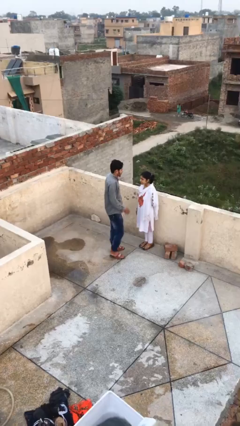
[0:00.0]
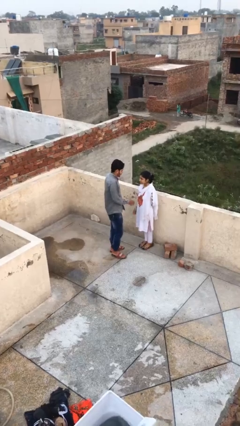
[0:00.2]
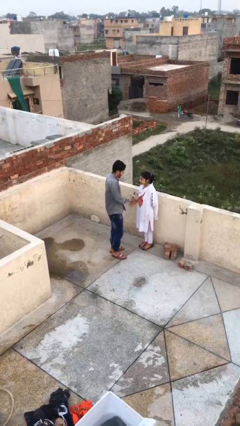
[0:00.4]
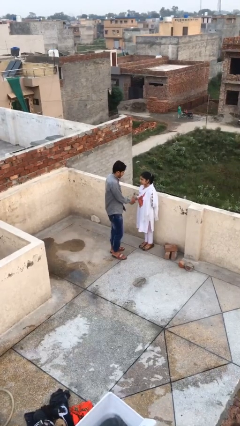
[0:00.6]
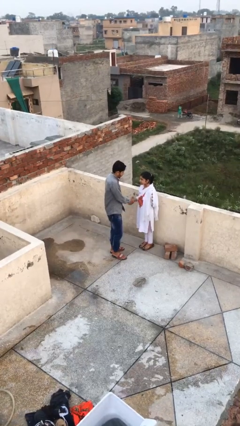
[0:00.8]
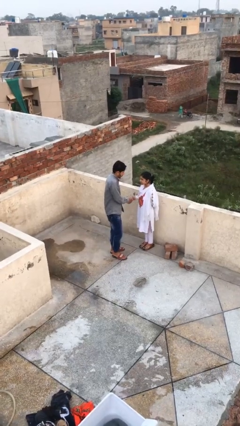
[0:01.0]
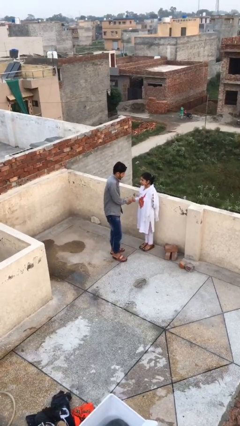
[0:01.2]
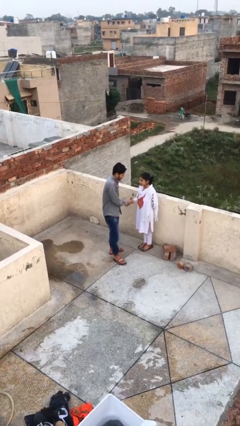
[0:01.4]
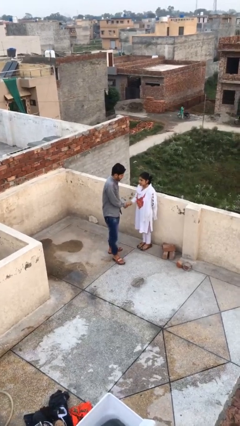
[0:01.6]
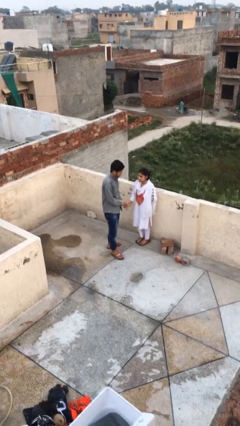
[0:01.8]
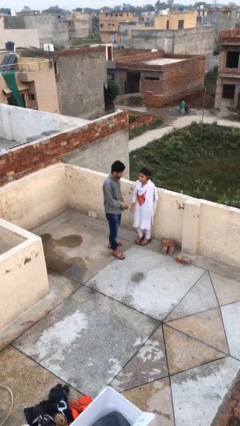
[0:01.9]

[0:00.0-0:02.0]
person shakes hand

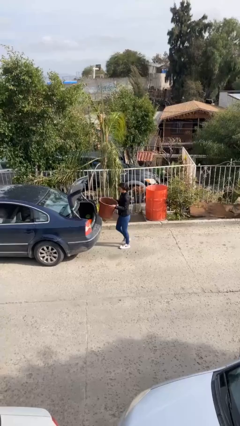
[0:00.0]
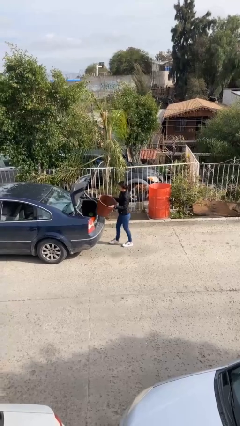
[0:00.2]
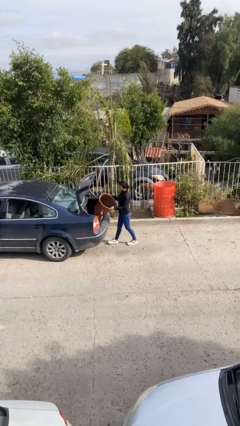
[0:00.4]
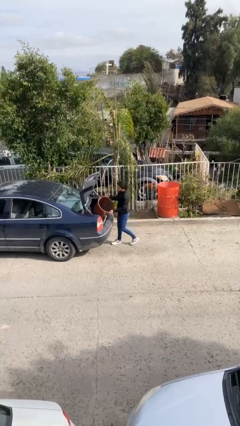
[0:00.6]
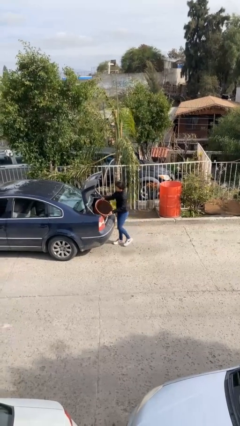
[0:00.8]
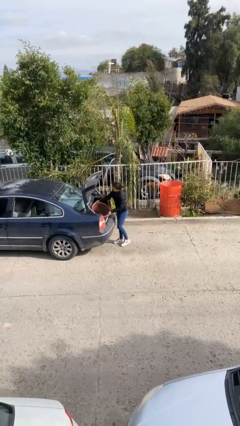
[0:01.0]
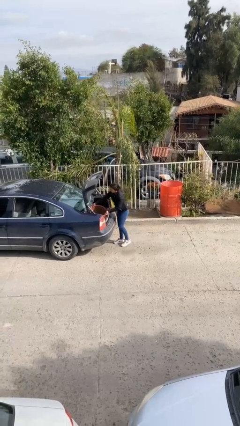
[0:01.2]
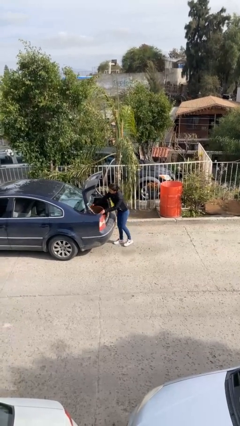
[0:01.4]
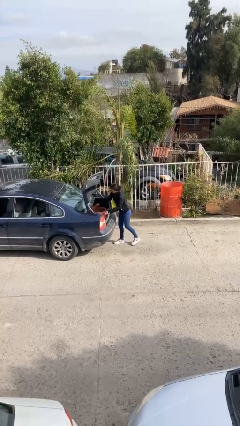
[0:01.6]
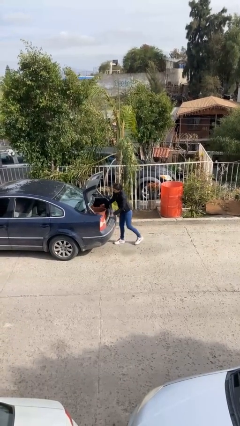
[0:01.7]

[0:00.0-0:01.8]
person loads car

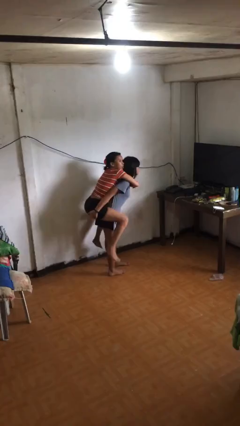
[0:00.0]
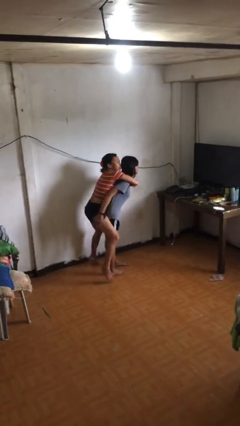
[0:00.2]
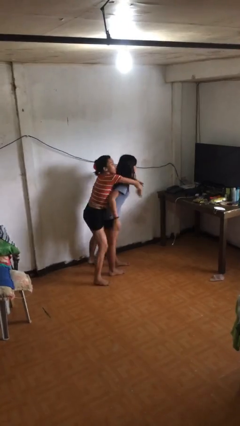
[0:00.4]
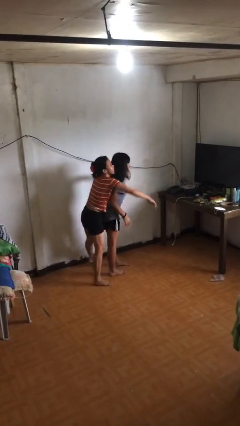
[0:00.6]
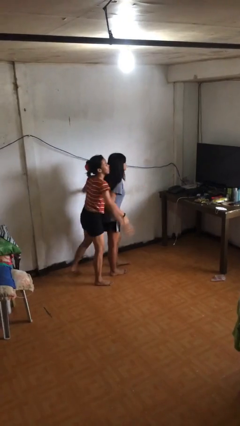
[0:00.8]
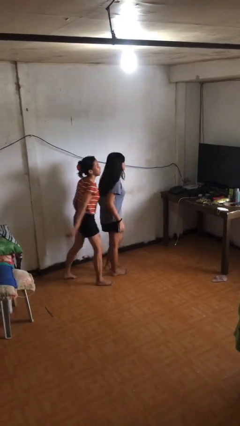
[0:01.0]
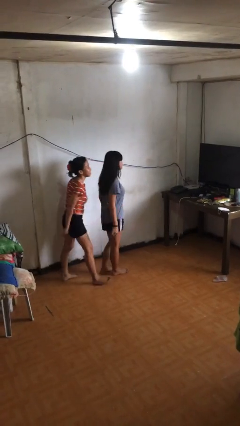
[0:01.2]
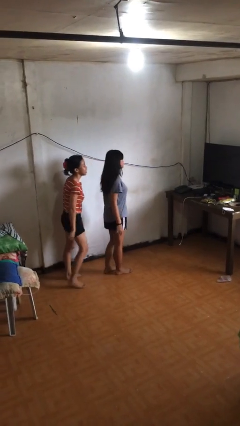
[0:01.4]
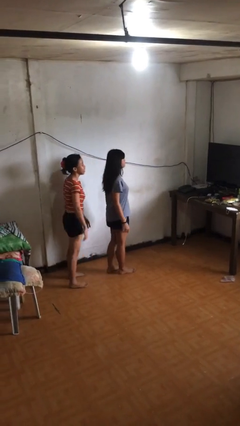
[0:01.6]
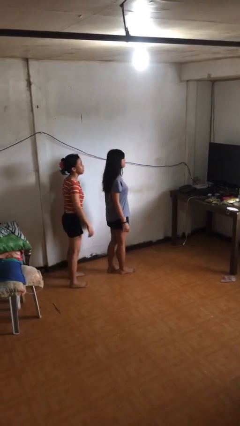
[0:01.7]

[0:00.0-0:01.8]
person puts down person

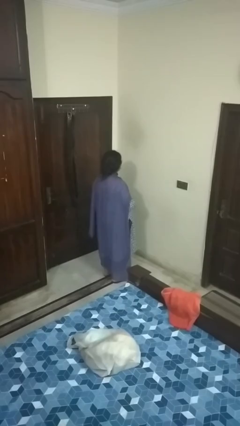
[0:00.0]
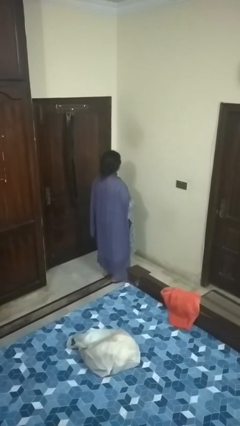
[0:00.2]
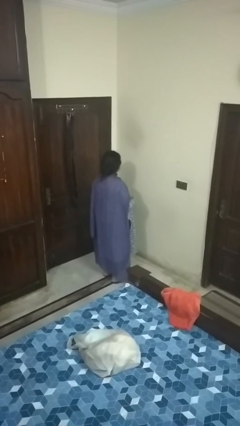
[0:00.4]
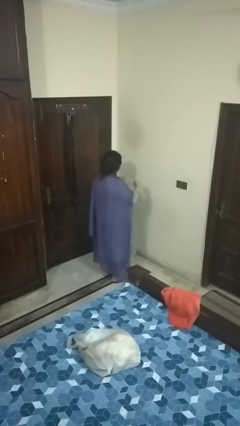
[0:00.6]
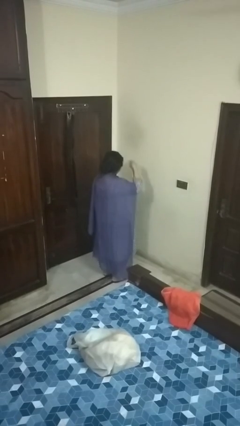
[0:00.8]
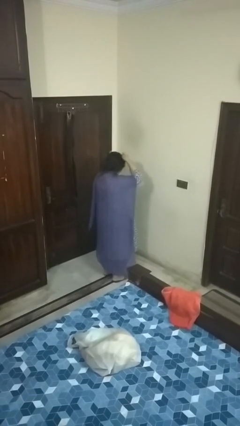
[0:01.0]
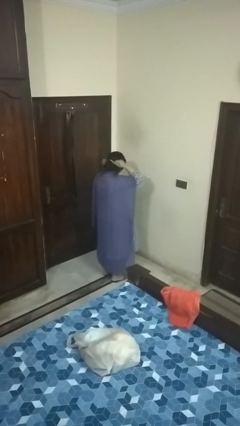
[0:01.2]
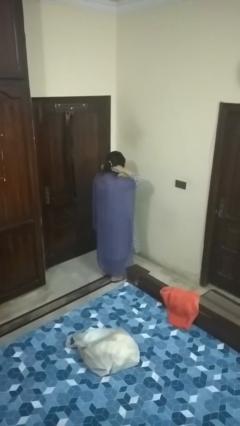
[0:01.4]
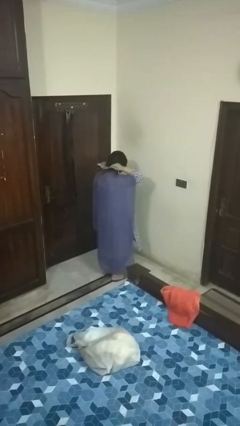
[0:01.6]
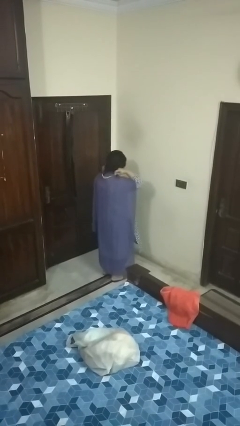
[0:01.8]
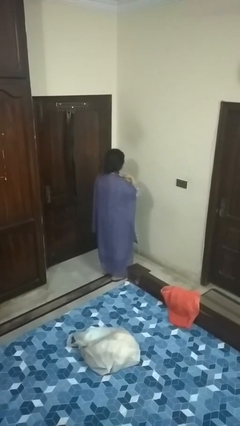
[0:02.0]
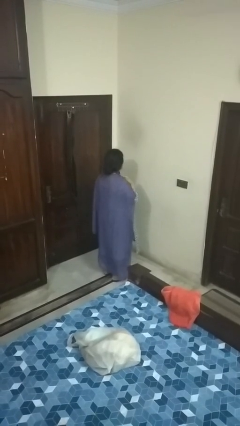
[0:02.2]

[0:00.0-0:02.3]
person puts on necklace

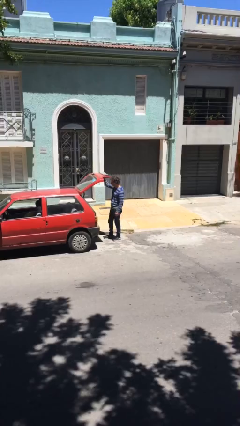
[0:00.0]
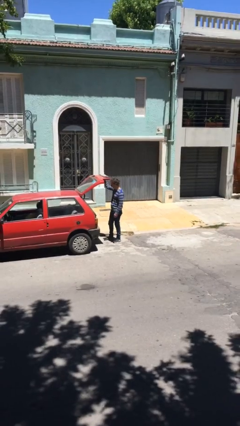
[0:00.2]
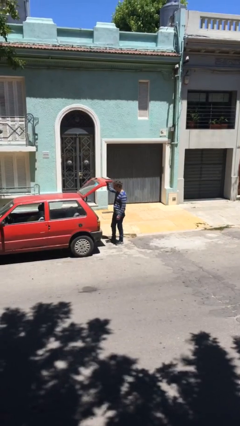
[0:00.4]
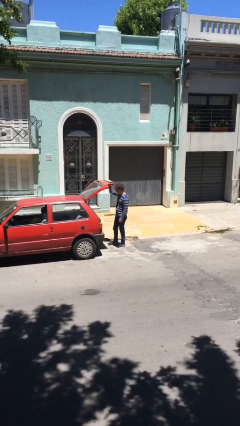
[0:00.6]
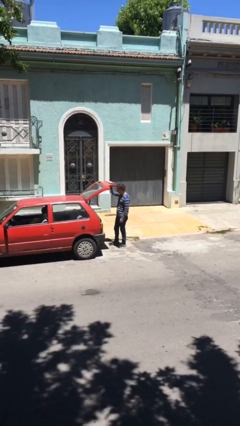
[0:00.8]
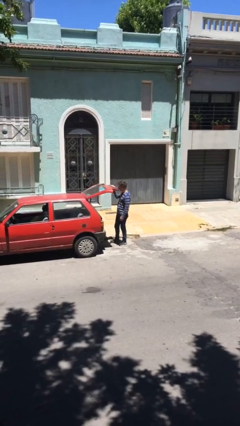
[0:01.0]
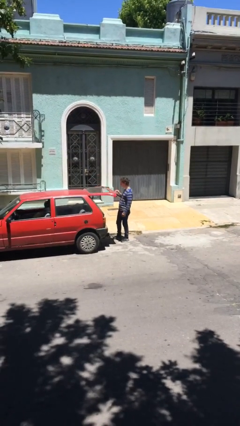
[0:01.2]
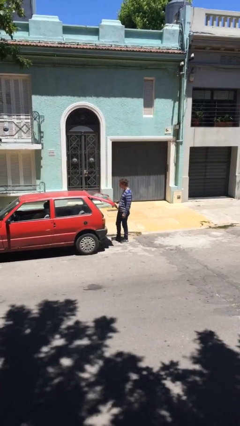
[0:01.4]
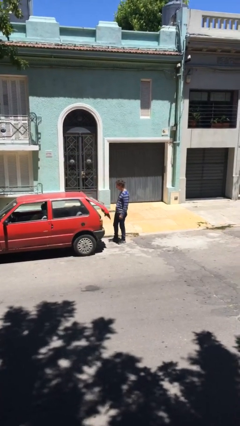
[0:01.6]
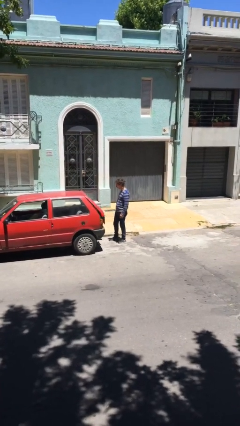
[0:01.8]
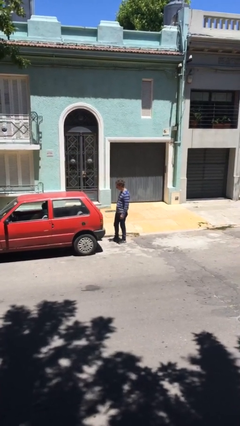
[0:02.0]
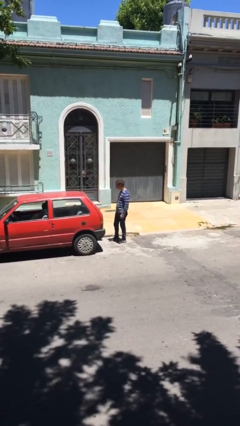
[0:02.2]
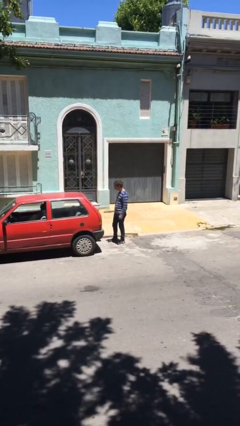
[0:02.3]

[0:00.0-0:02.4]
person closes car trunk

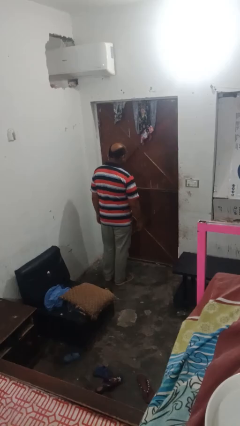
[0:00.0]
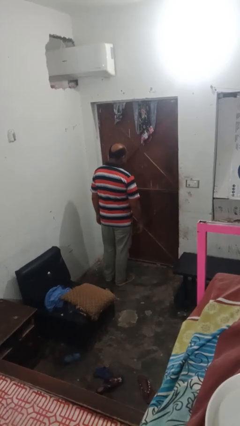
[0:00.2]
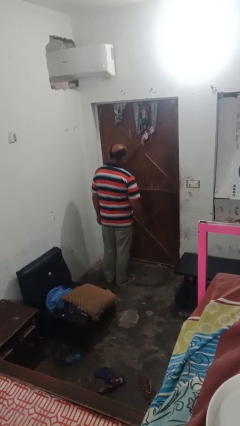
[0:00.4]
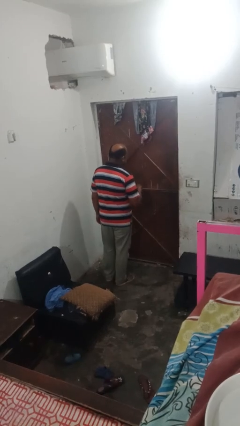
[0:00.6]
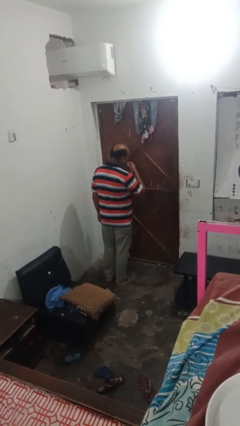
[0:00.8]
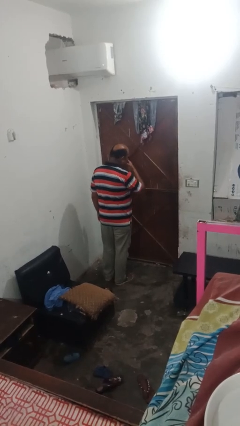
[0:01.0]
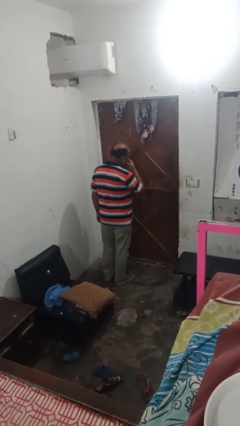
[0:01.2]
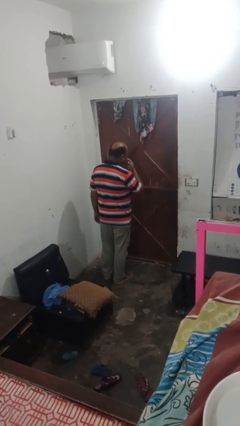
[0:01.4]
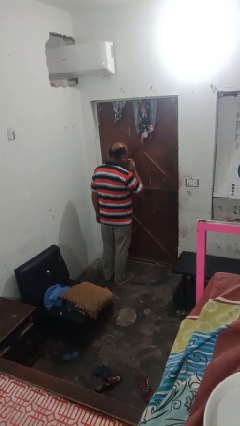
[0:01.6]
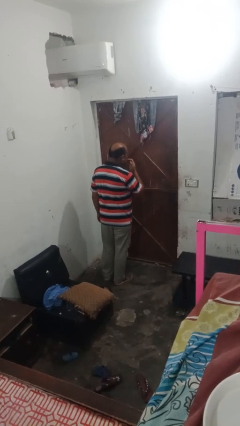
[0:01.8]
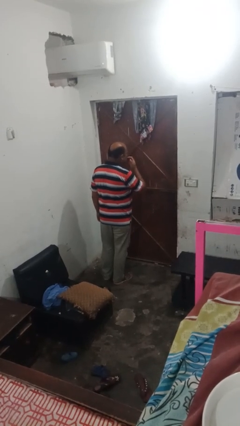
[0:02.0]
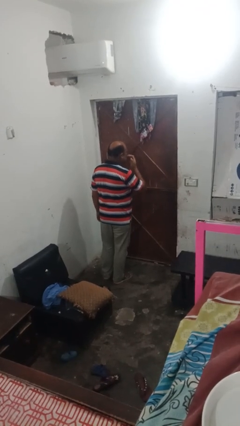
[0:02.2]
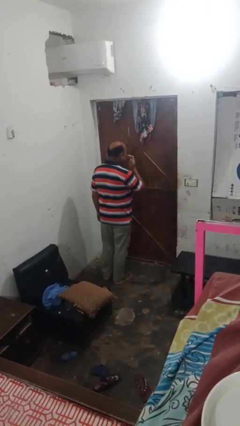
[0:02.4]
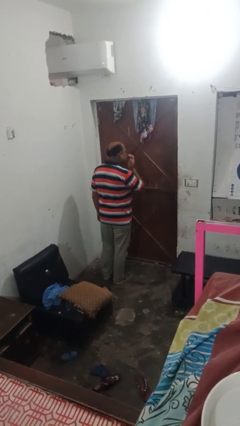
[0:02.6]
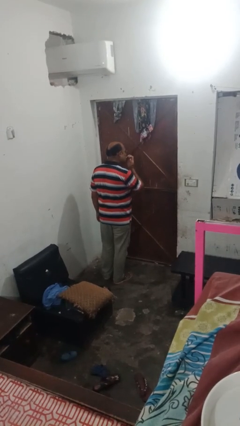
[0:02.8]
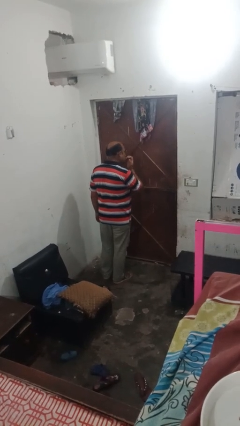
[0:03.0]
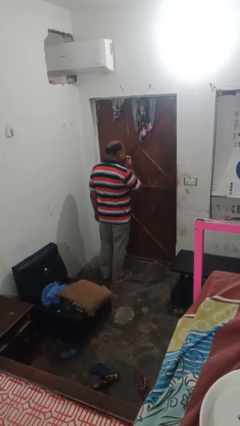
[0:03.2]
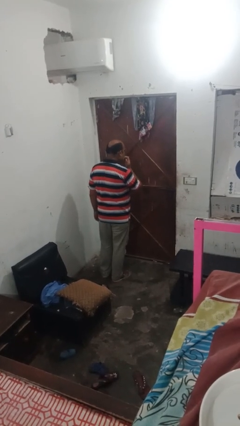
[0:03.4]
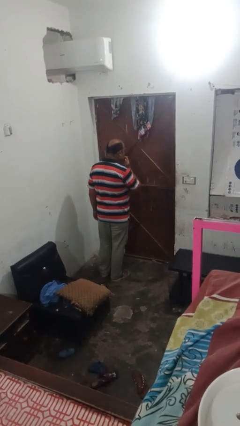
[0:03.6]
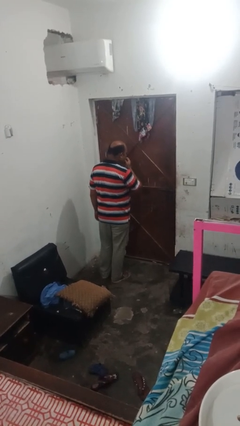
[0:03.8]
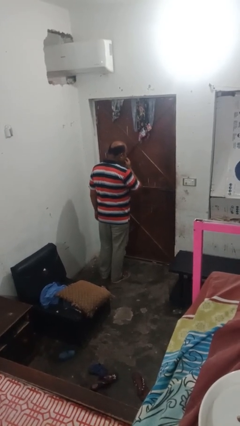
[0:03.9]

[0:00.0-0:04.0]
person licks fingers

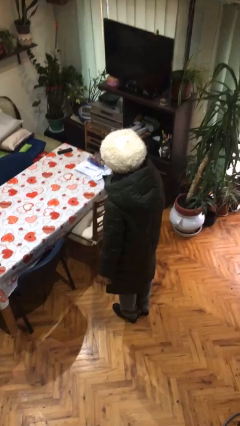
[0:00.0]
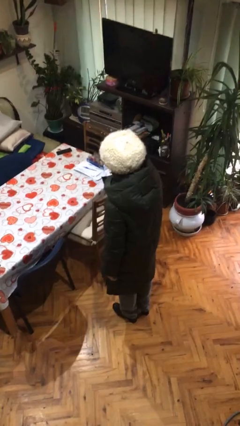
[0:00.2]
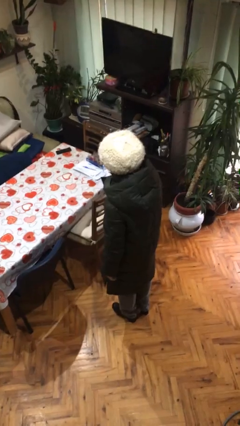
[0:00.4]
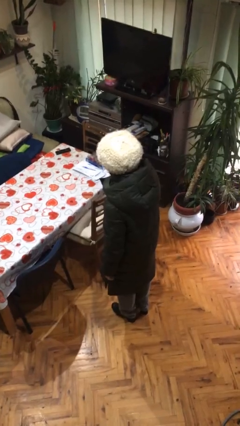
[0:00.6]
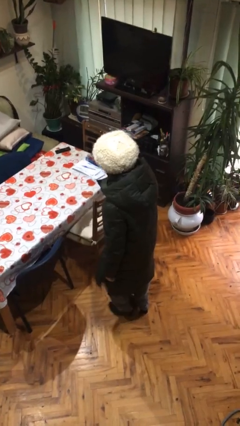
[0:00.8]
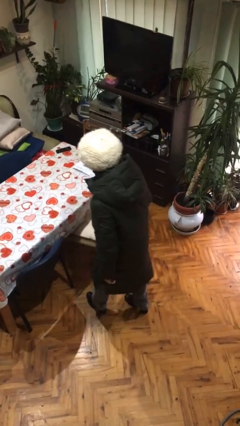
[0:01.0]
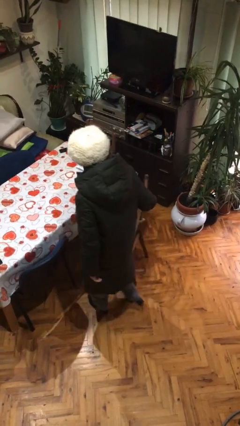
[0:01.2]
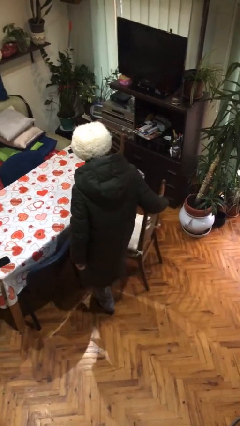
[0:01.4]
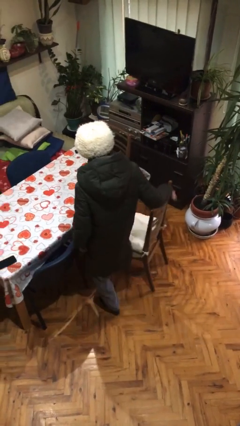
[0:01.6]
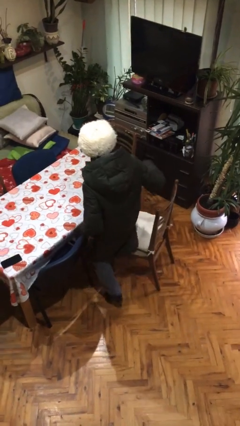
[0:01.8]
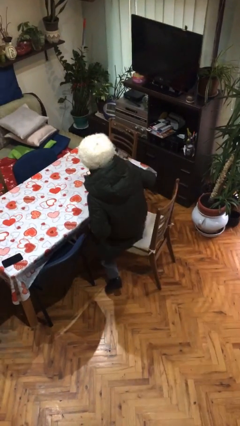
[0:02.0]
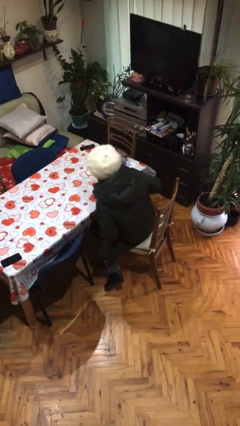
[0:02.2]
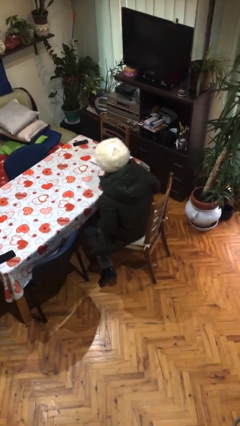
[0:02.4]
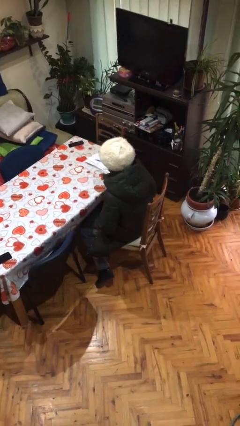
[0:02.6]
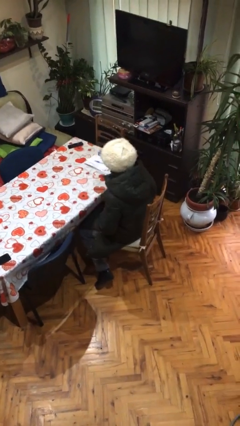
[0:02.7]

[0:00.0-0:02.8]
person sits down
